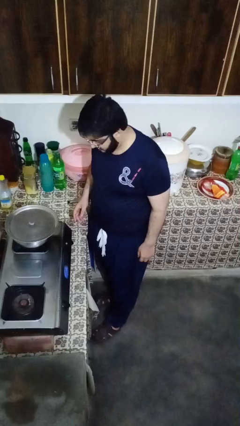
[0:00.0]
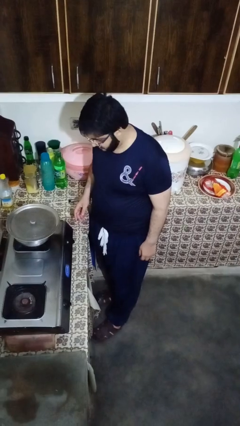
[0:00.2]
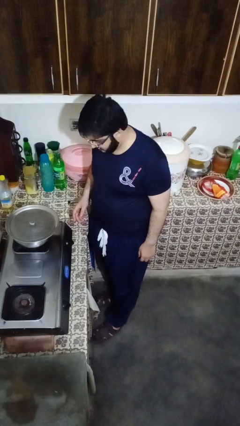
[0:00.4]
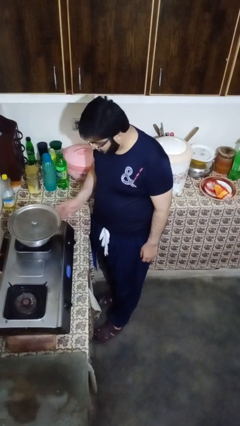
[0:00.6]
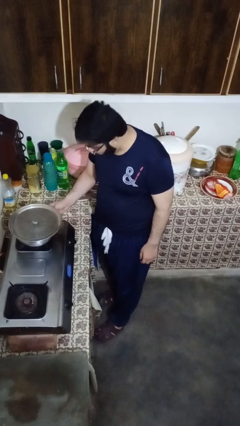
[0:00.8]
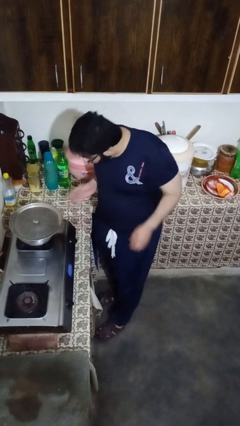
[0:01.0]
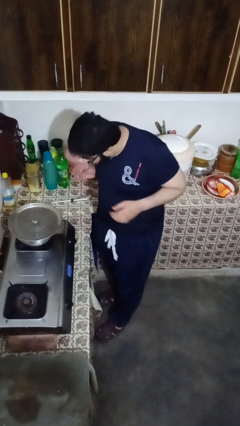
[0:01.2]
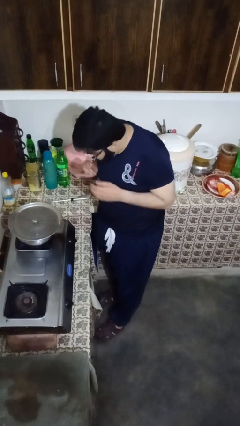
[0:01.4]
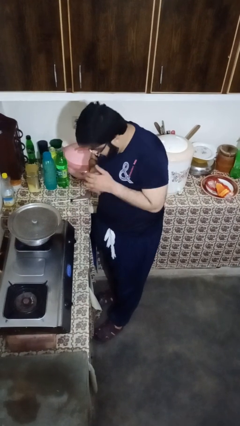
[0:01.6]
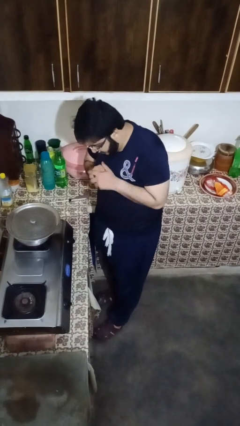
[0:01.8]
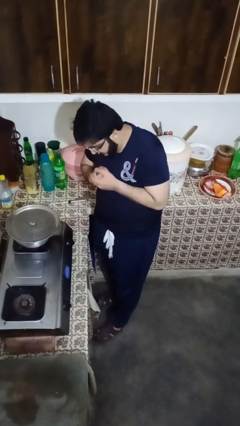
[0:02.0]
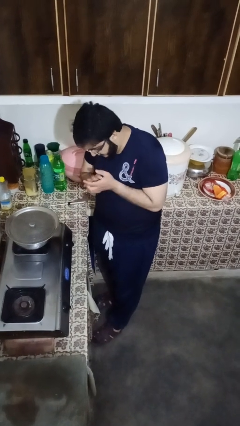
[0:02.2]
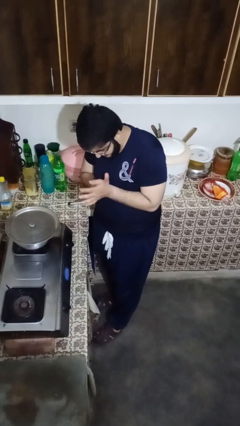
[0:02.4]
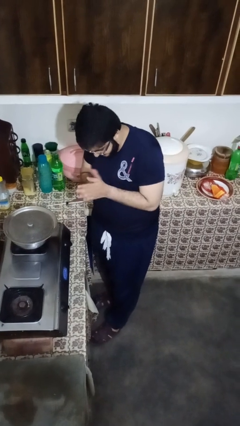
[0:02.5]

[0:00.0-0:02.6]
person burns hand

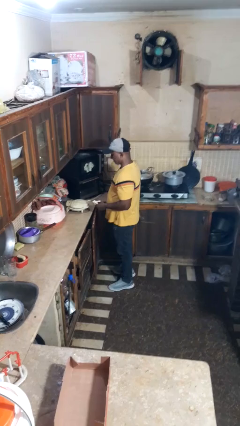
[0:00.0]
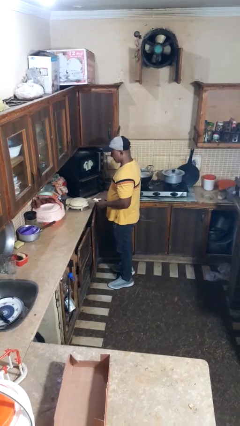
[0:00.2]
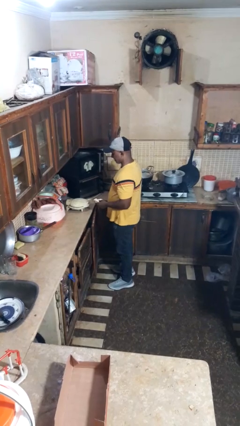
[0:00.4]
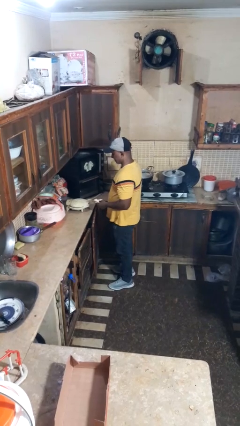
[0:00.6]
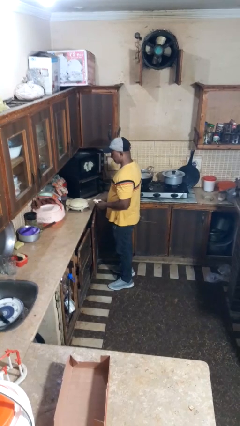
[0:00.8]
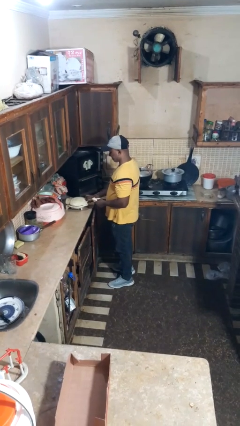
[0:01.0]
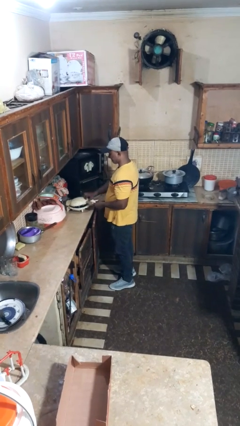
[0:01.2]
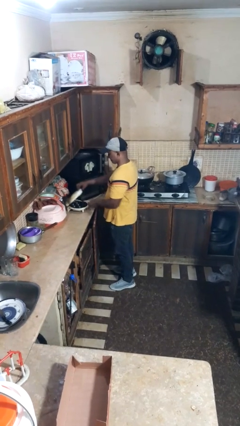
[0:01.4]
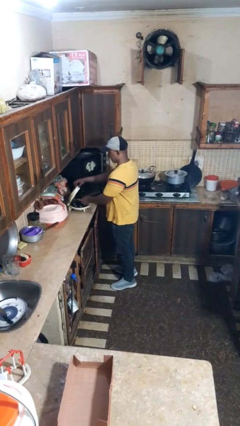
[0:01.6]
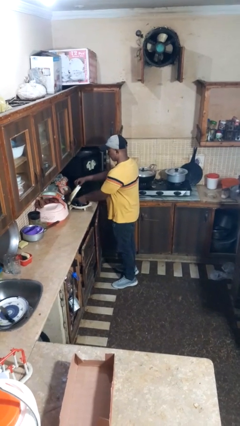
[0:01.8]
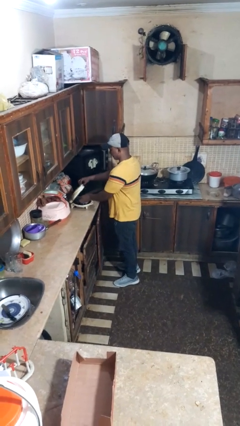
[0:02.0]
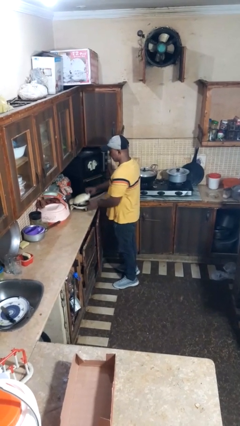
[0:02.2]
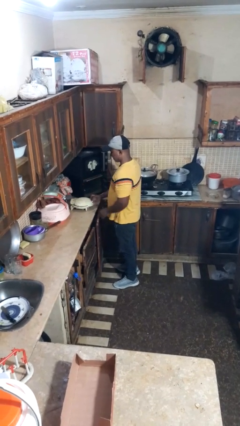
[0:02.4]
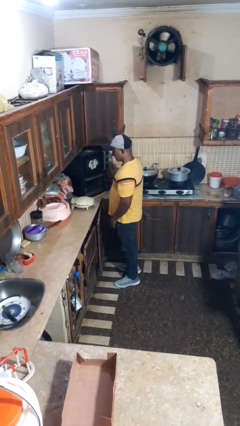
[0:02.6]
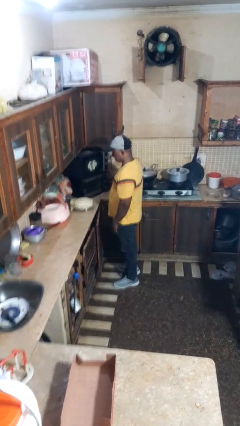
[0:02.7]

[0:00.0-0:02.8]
person puts object into toaster

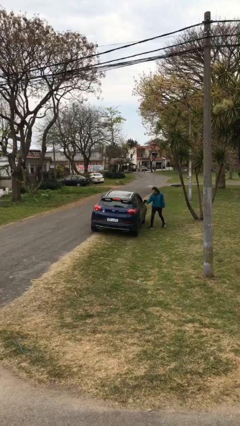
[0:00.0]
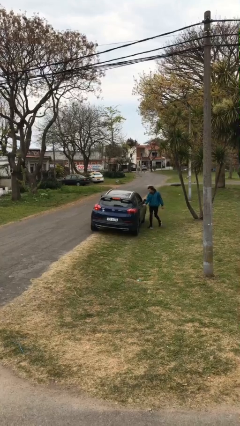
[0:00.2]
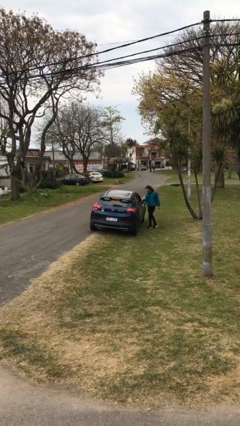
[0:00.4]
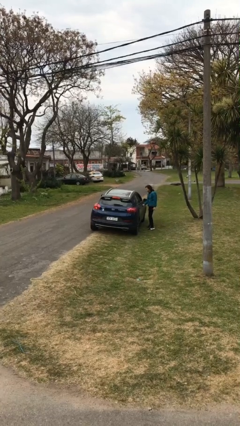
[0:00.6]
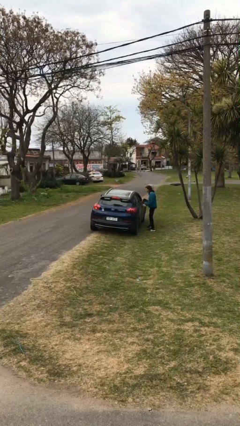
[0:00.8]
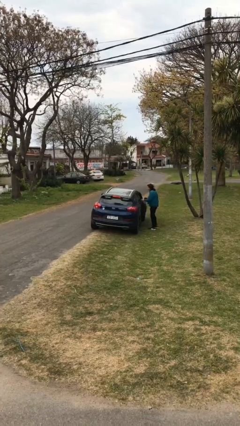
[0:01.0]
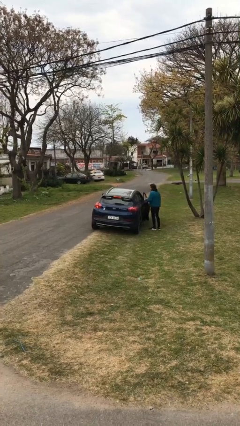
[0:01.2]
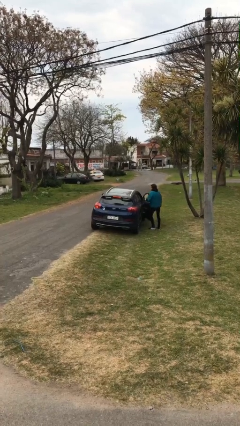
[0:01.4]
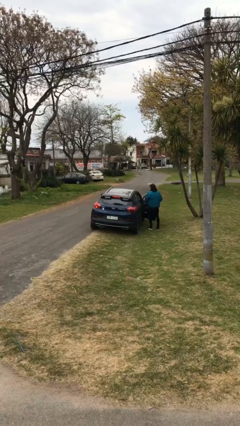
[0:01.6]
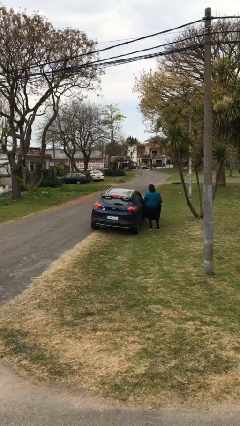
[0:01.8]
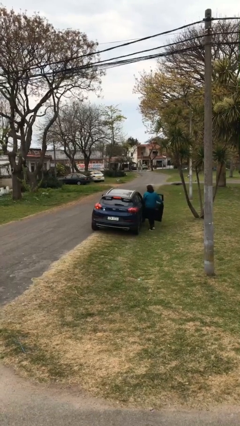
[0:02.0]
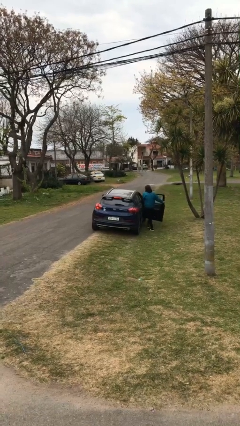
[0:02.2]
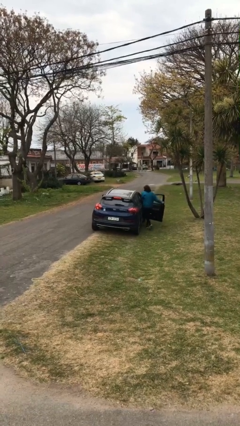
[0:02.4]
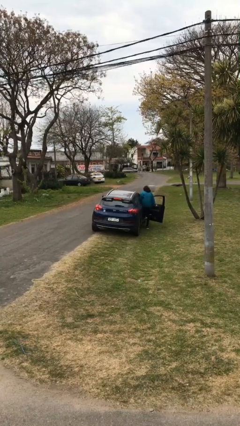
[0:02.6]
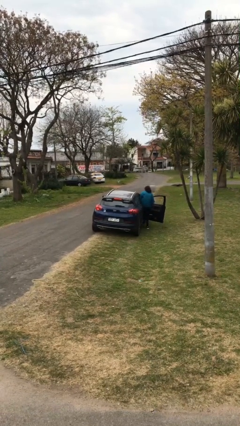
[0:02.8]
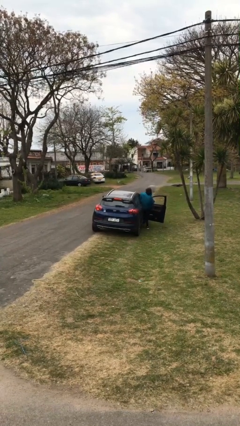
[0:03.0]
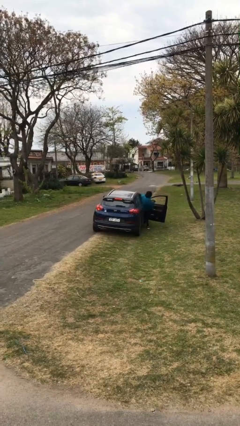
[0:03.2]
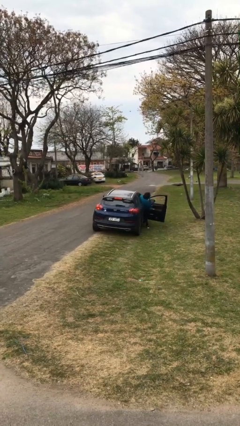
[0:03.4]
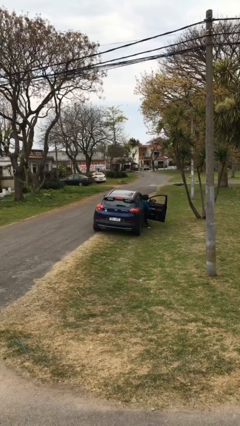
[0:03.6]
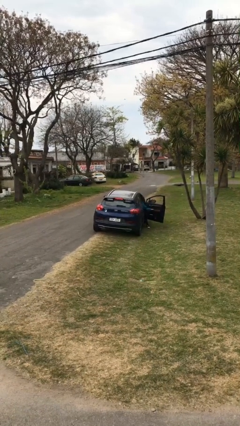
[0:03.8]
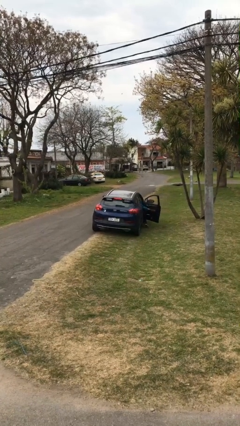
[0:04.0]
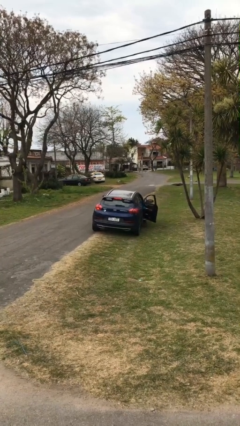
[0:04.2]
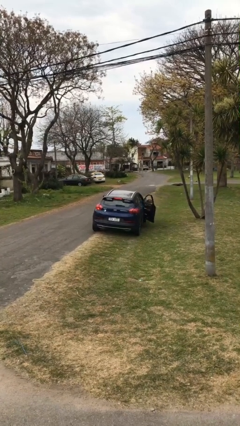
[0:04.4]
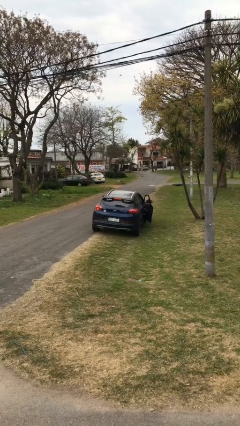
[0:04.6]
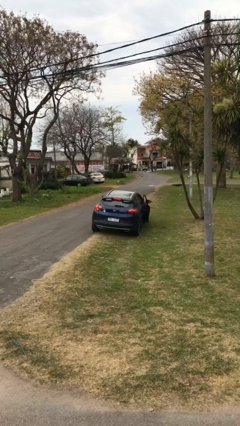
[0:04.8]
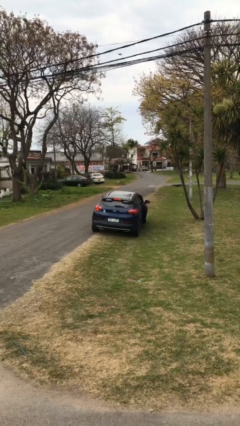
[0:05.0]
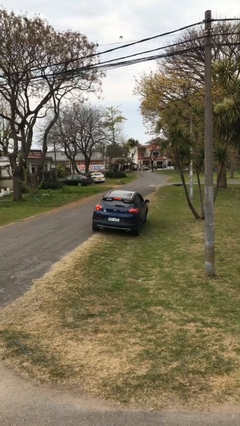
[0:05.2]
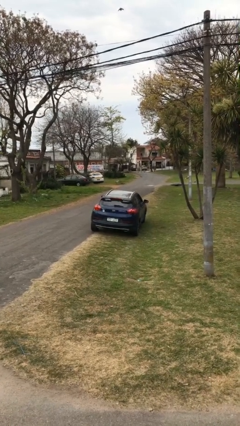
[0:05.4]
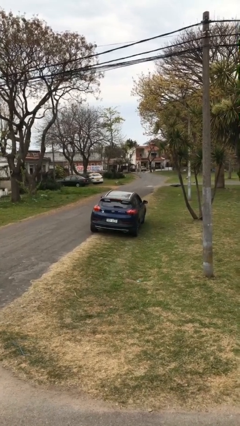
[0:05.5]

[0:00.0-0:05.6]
car picks up person

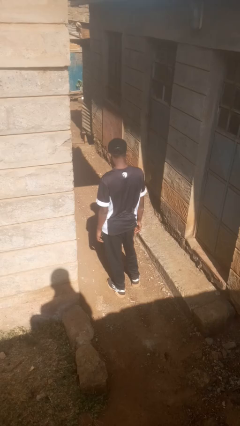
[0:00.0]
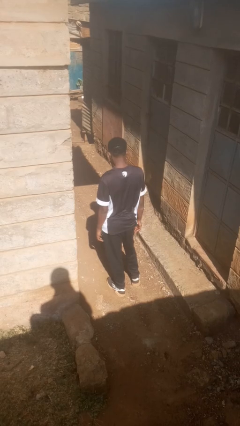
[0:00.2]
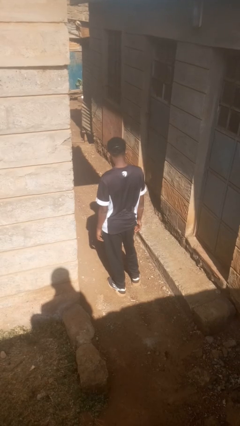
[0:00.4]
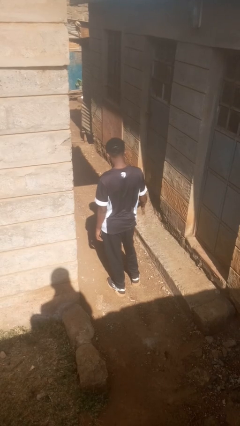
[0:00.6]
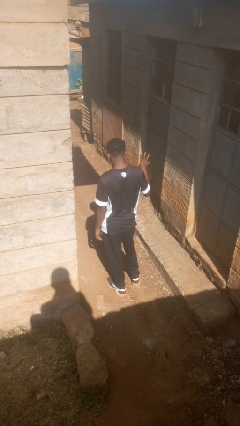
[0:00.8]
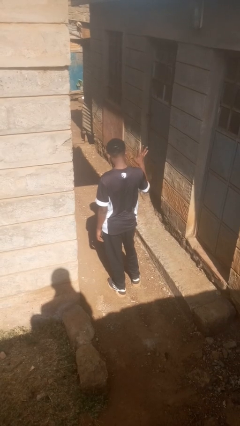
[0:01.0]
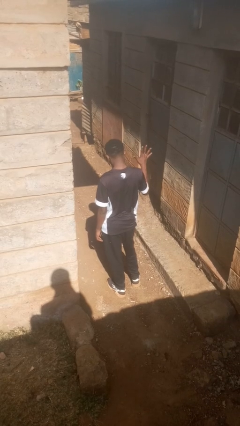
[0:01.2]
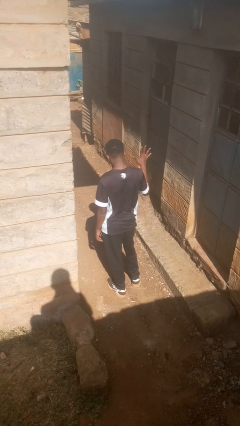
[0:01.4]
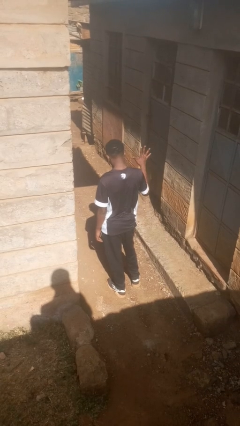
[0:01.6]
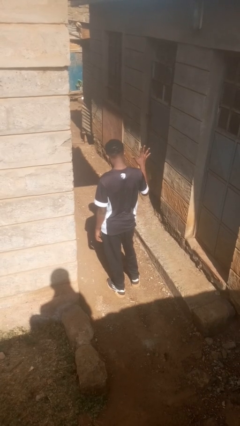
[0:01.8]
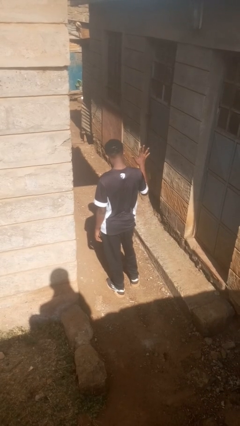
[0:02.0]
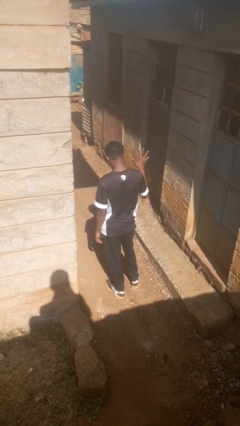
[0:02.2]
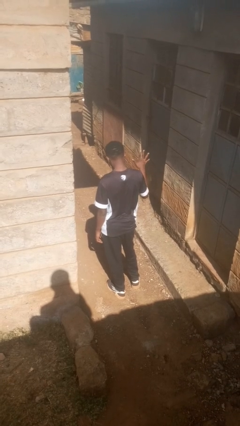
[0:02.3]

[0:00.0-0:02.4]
person gestures number five

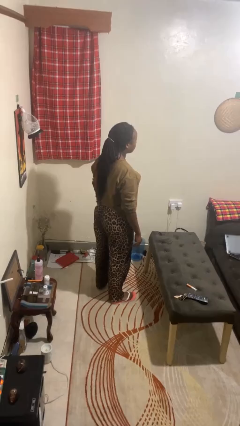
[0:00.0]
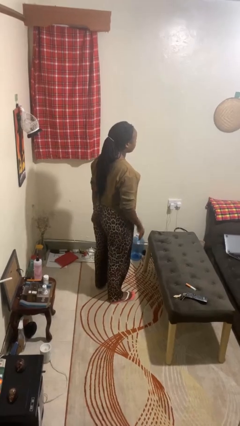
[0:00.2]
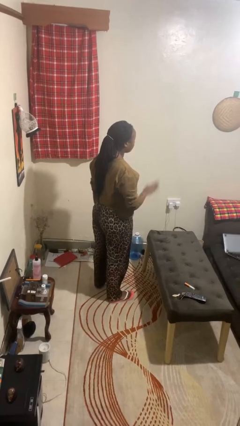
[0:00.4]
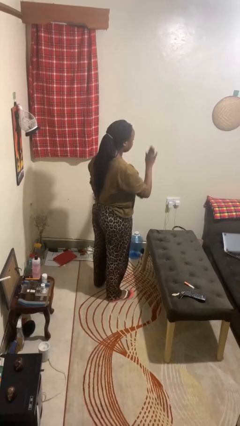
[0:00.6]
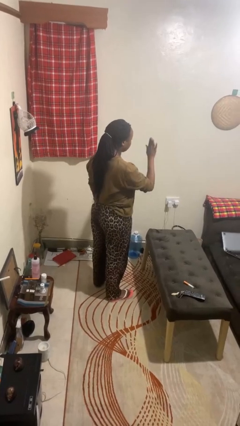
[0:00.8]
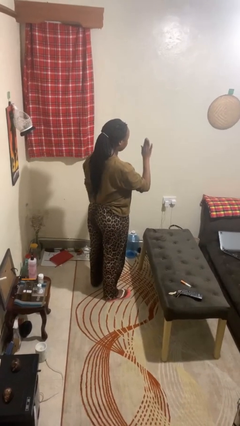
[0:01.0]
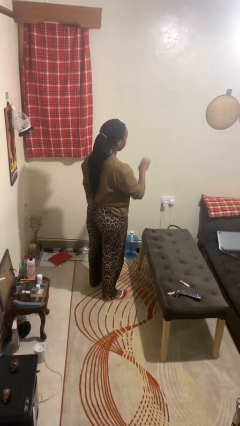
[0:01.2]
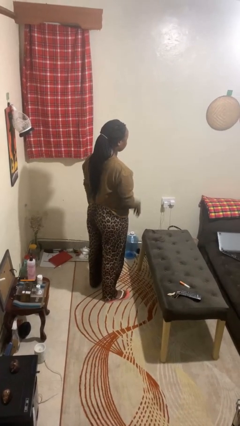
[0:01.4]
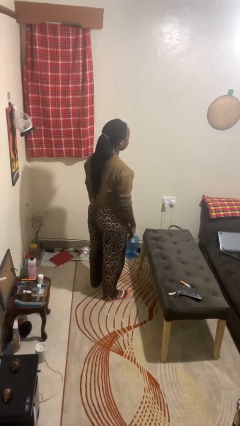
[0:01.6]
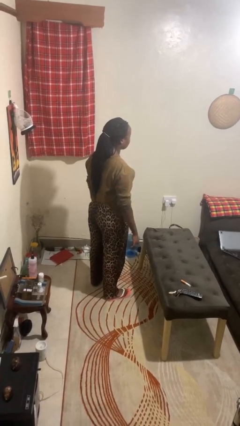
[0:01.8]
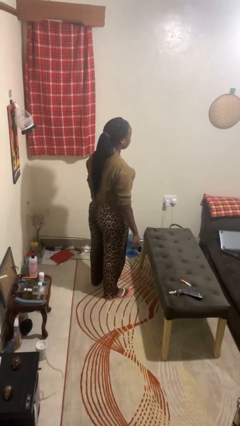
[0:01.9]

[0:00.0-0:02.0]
person gestures stop

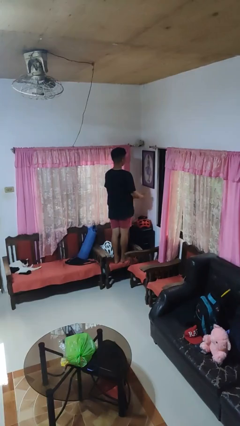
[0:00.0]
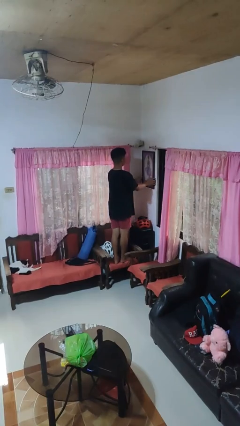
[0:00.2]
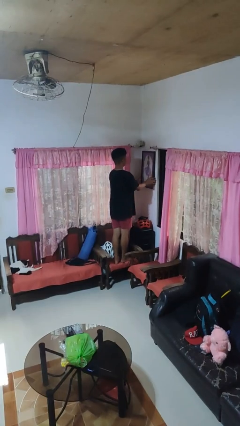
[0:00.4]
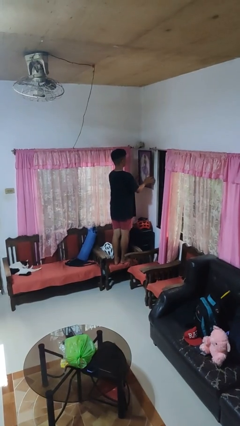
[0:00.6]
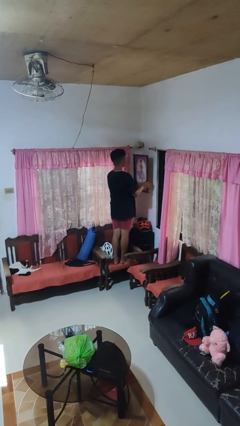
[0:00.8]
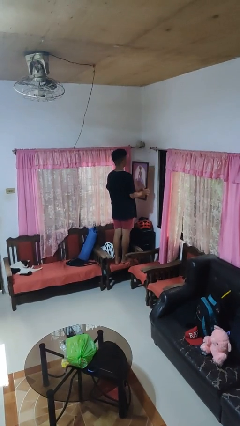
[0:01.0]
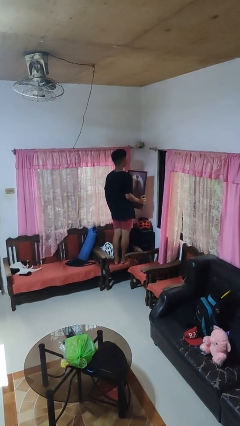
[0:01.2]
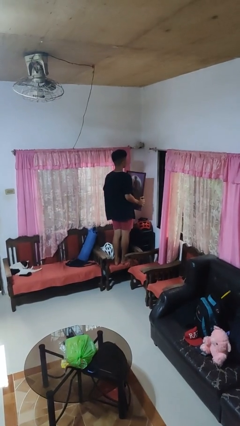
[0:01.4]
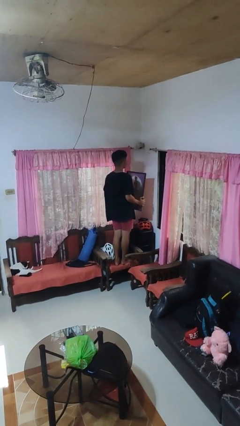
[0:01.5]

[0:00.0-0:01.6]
person takes down picture frame
